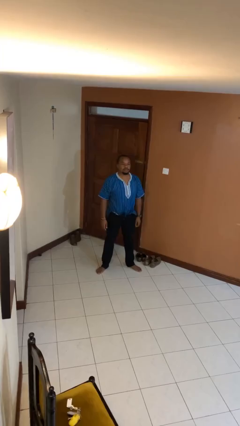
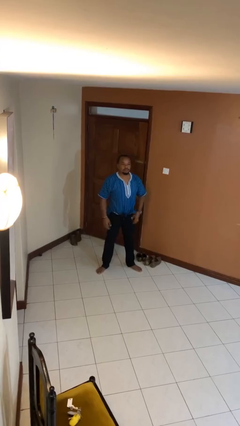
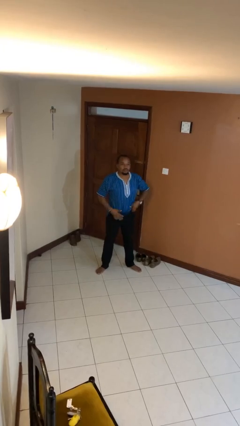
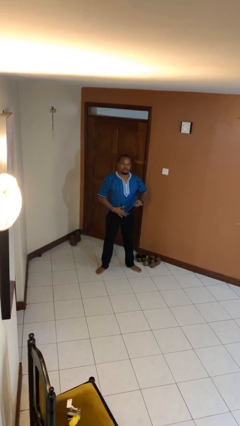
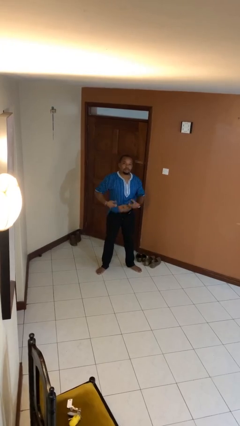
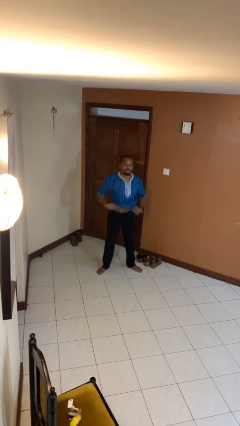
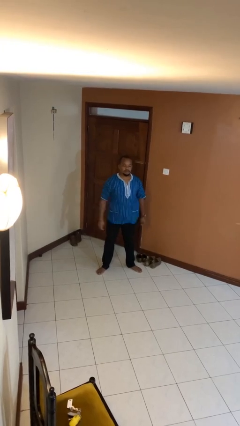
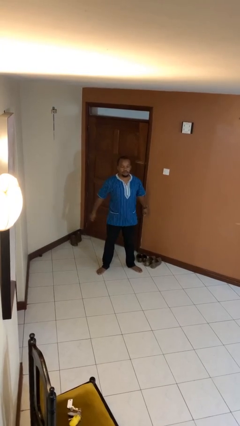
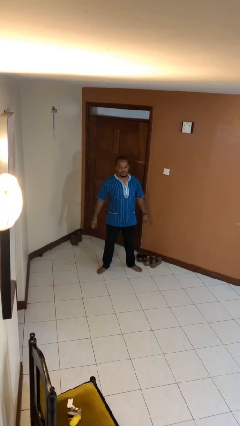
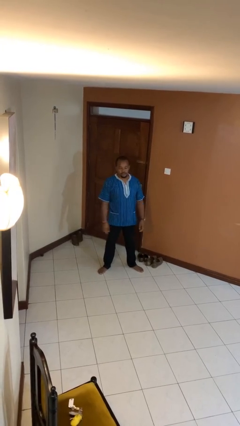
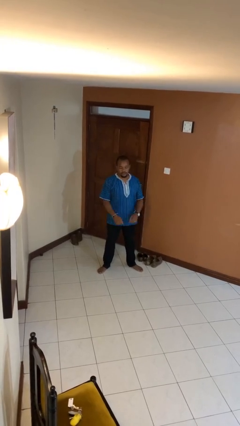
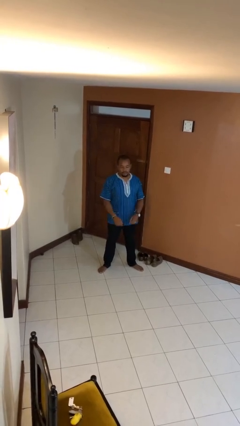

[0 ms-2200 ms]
person untucks shirt

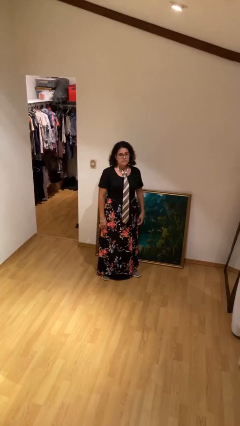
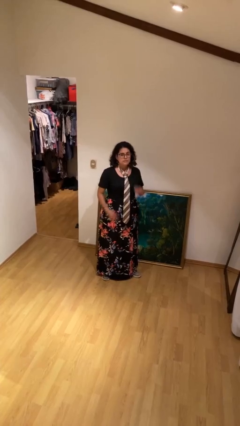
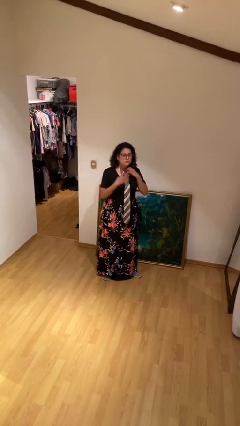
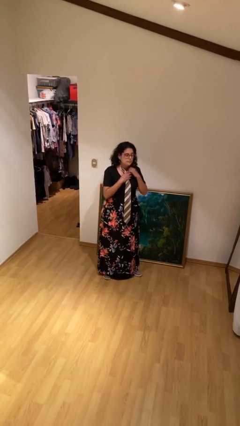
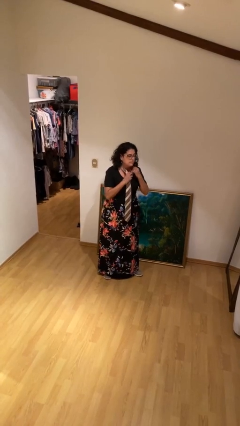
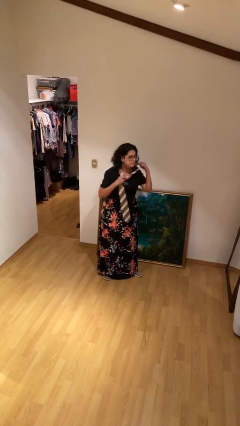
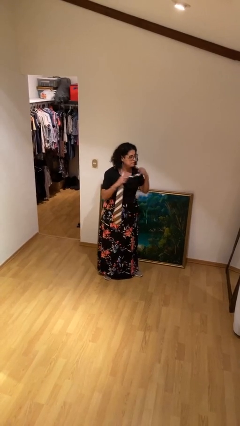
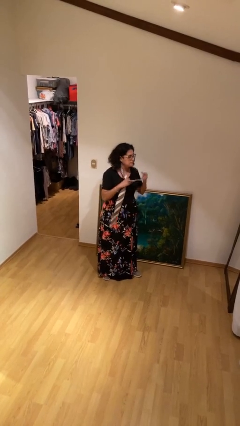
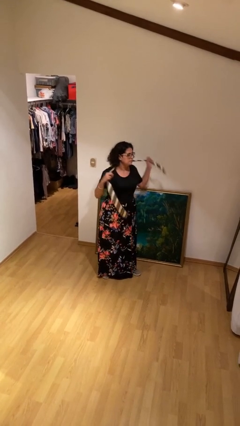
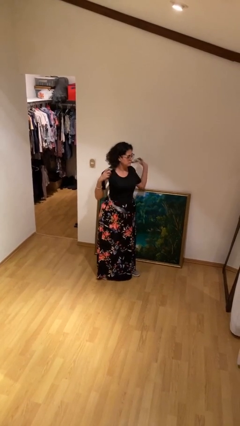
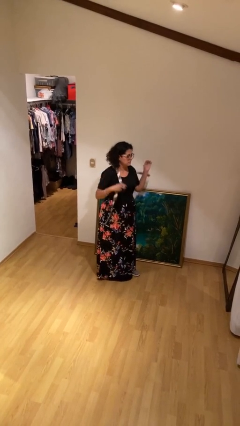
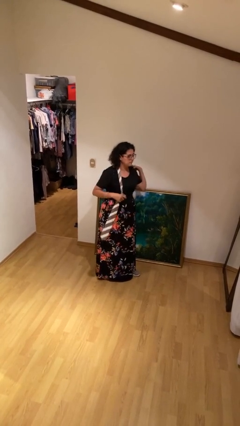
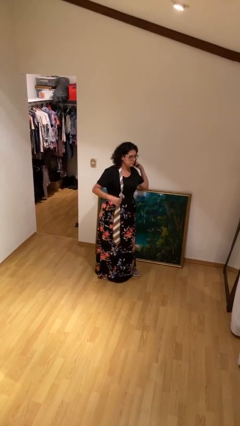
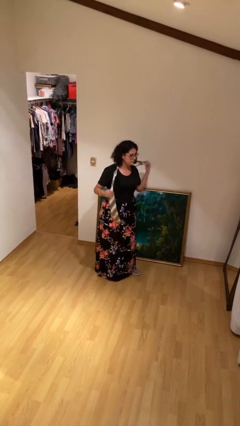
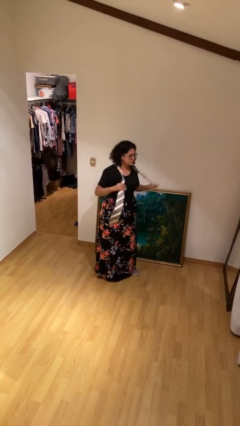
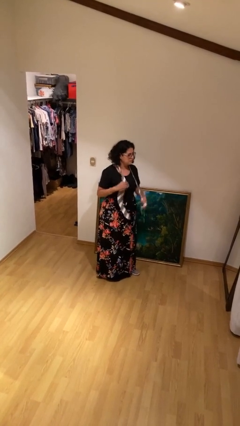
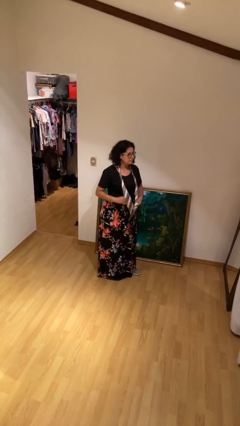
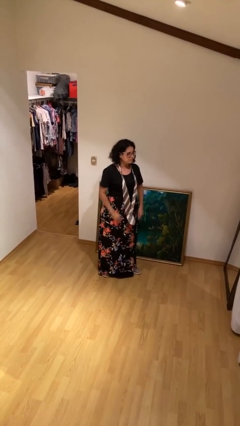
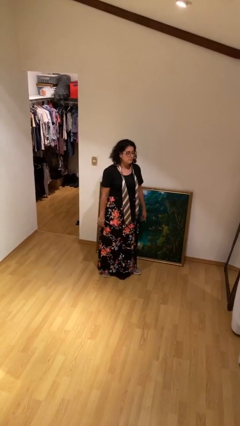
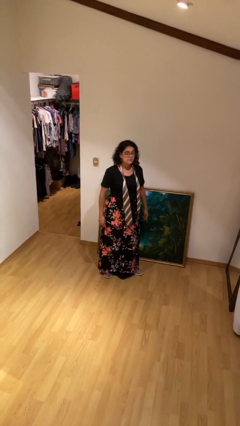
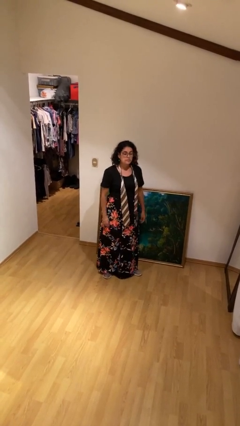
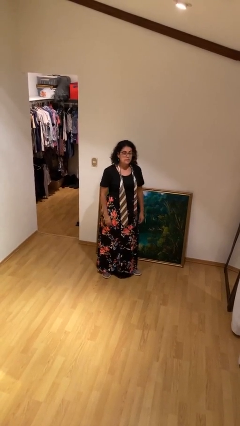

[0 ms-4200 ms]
person takes off necktie

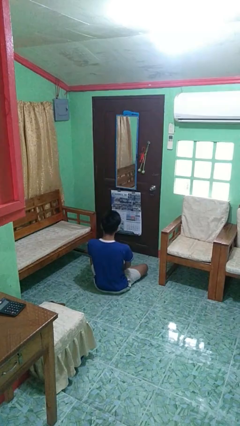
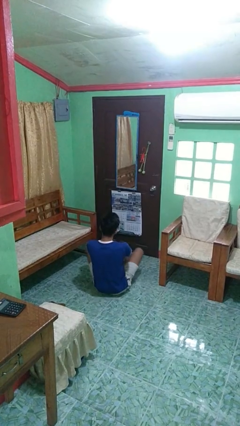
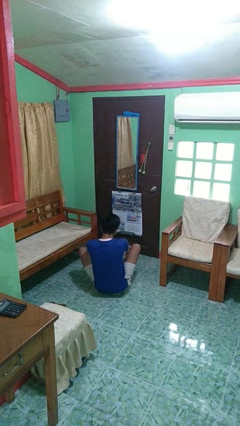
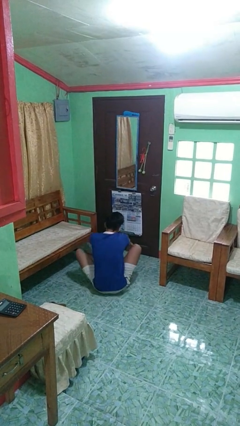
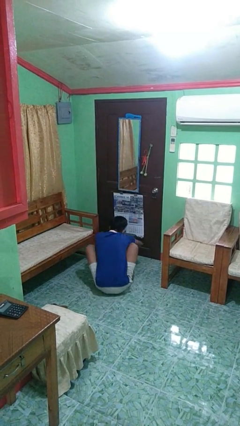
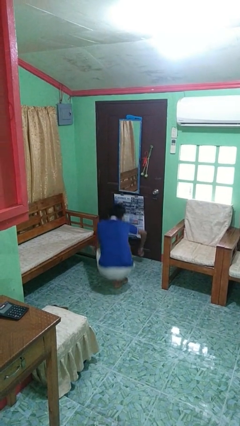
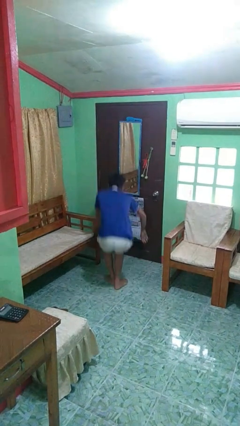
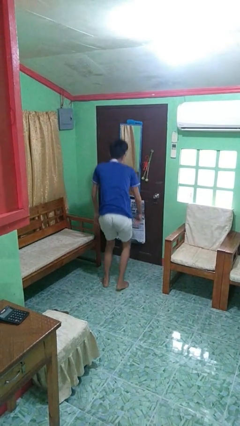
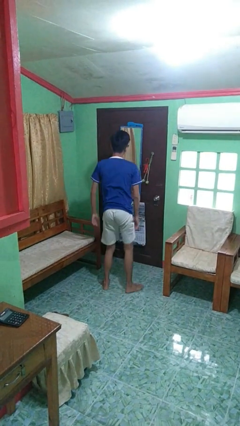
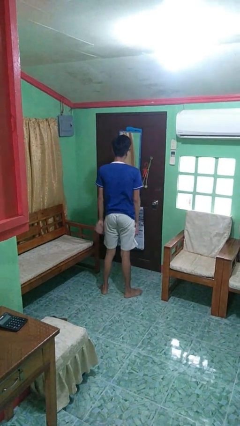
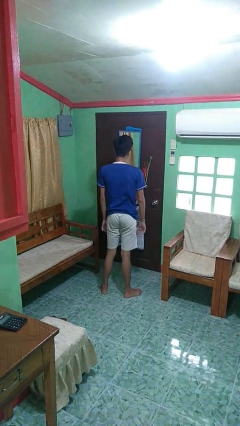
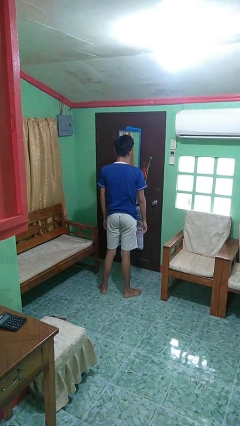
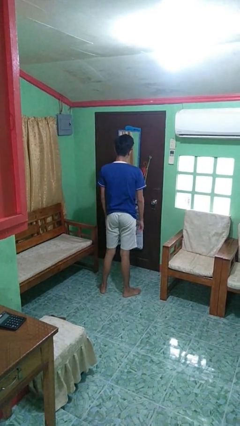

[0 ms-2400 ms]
person stands up

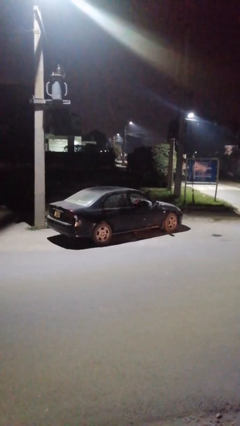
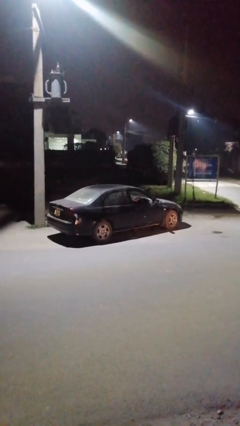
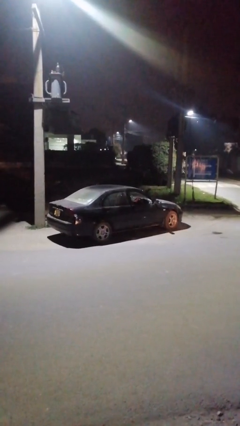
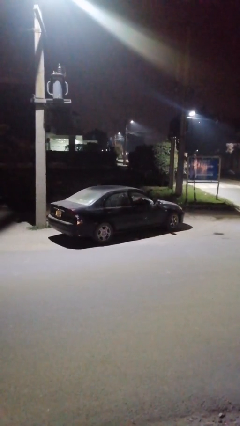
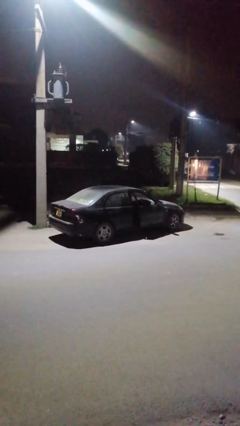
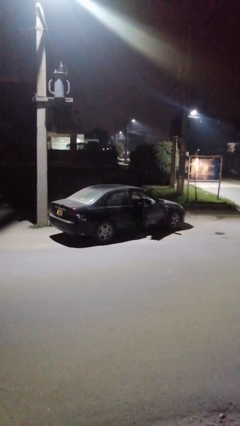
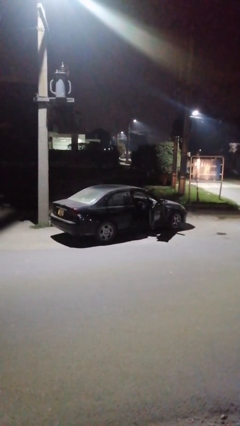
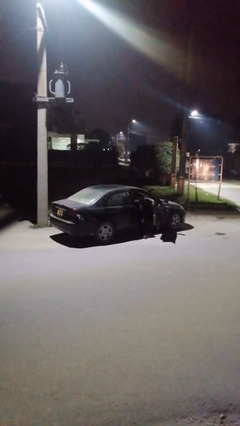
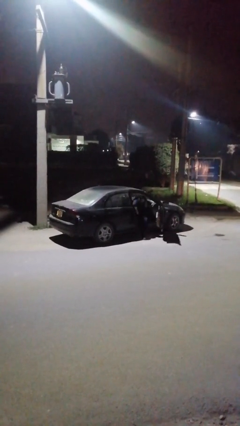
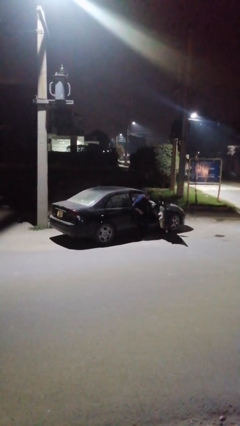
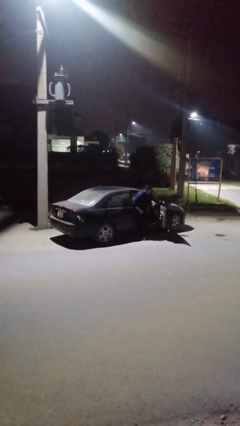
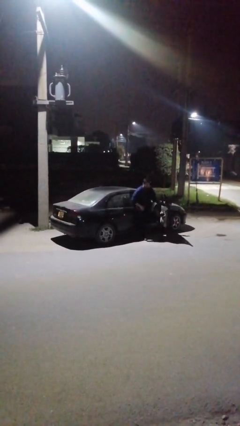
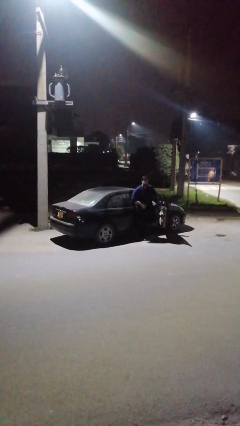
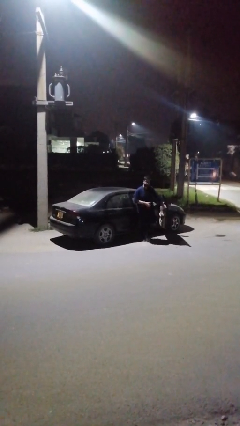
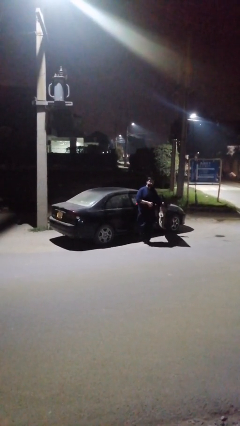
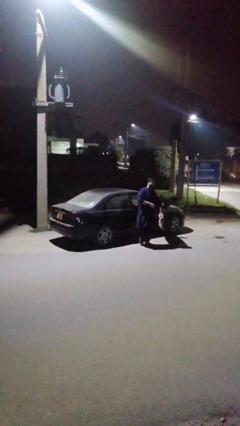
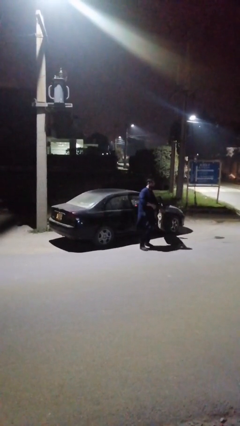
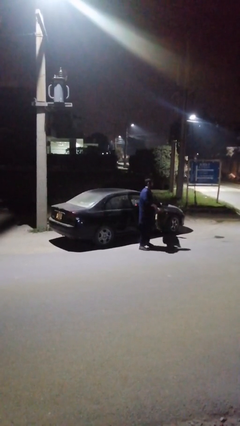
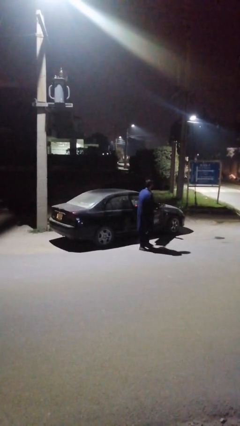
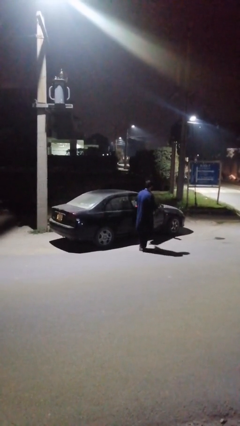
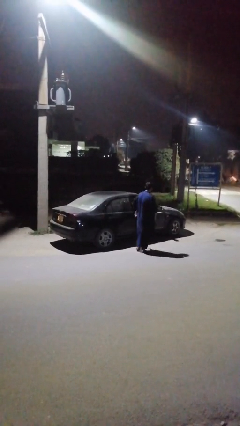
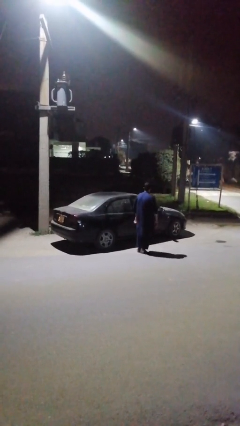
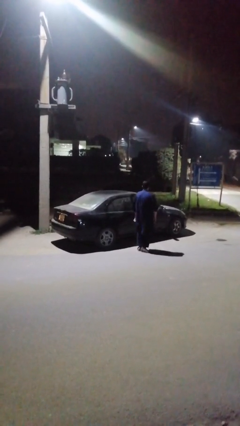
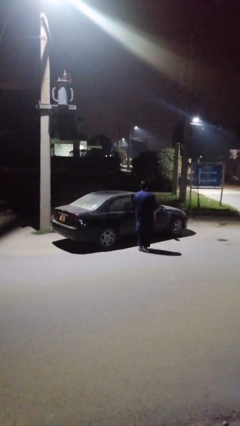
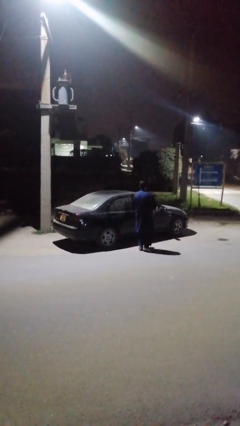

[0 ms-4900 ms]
car drops off person

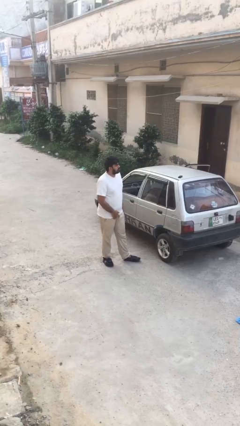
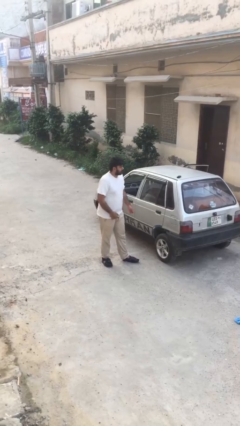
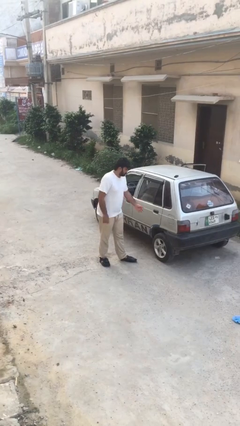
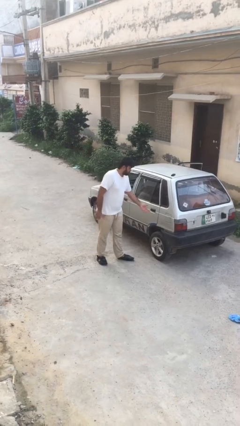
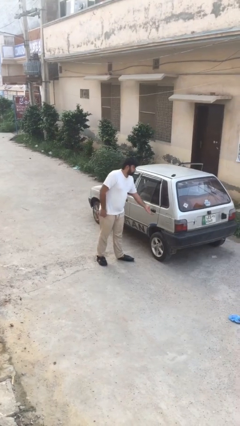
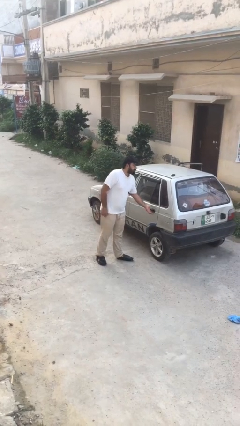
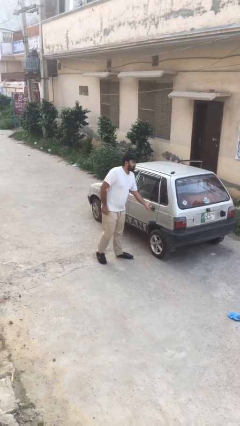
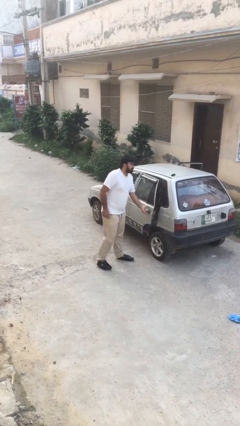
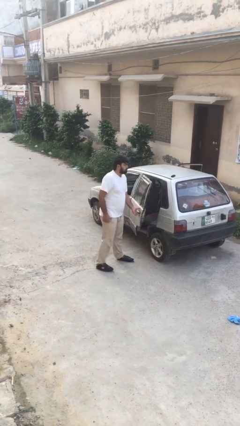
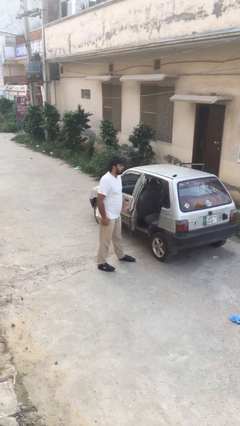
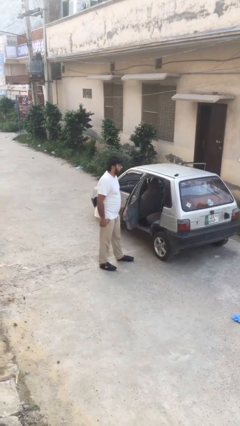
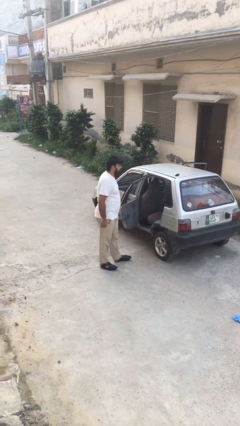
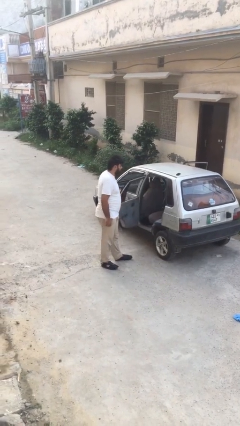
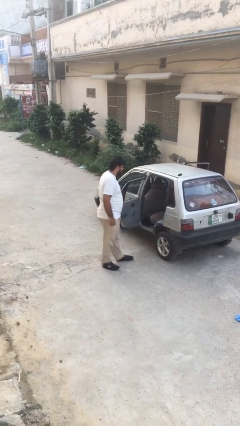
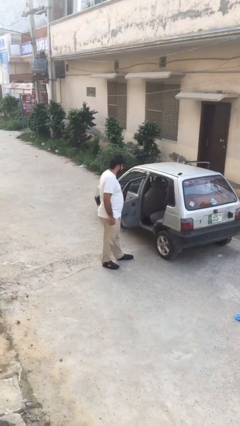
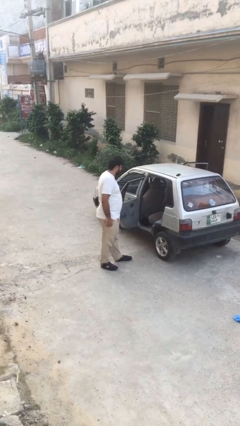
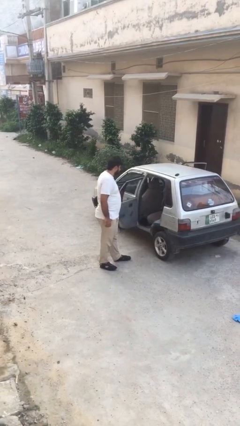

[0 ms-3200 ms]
person opens car door

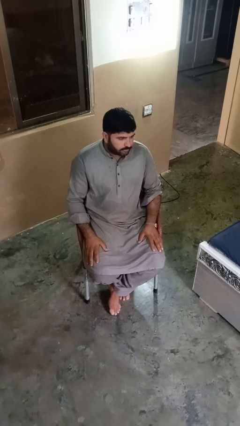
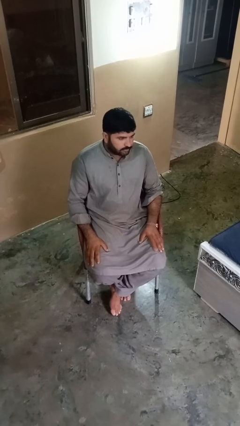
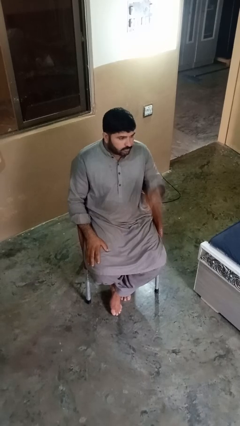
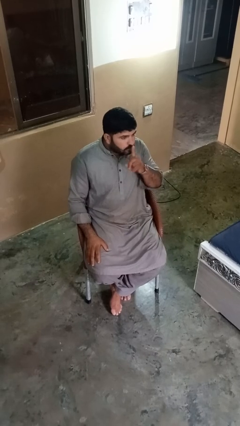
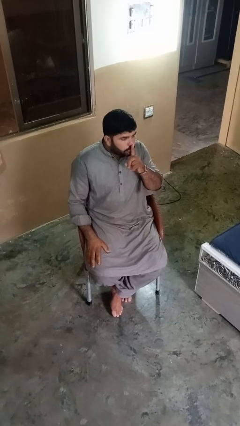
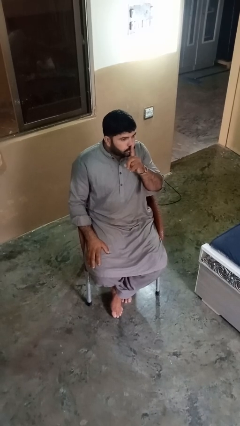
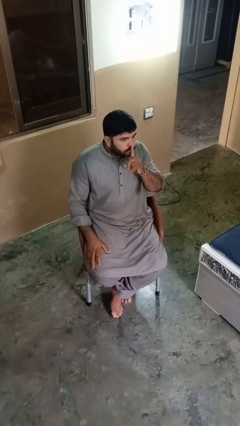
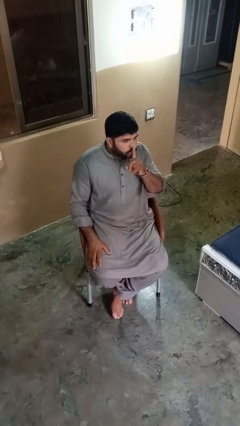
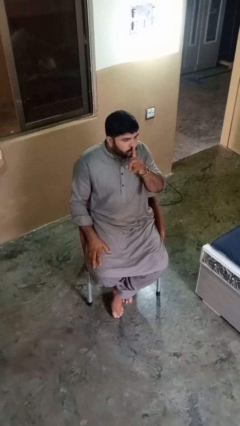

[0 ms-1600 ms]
person gestures be quiet
